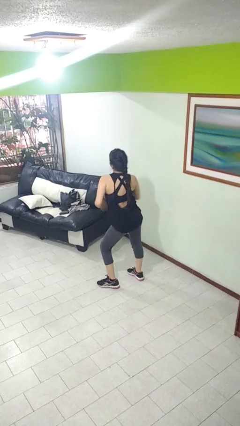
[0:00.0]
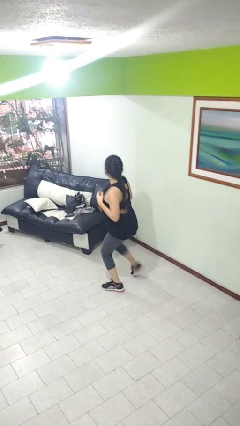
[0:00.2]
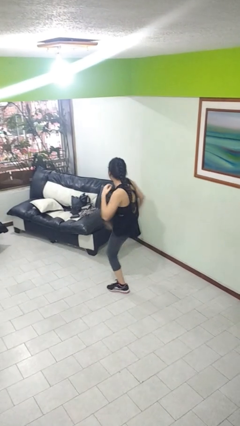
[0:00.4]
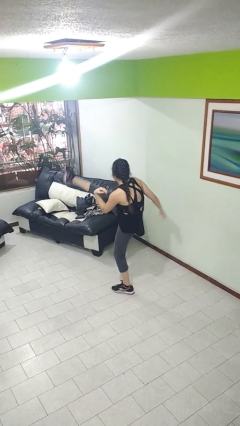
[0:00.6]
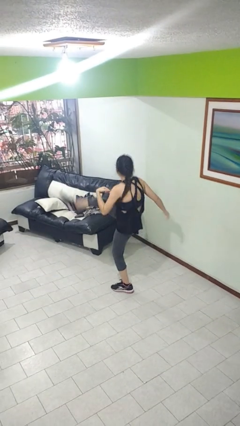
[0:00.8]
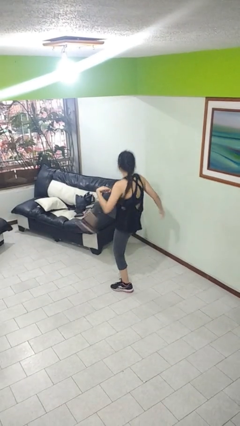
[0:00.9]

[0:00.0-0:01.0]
person karate kicks

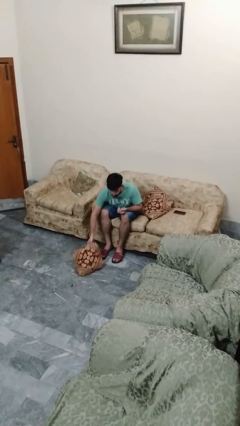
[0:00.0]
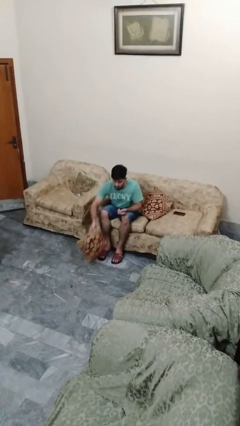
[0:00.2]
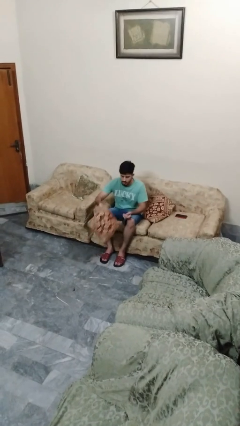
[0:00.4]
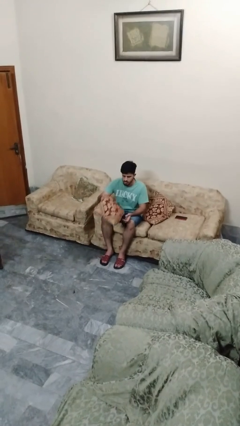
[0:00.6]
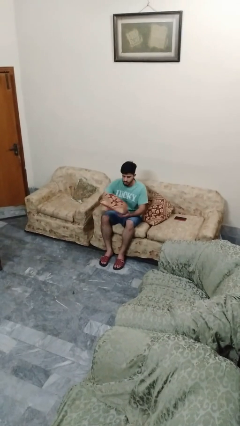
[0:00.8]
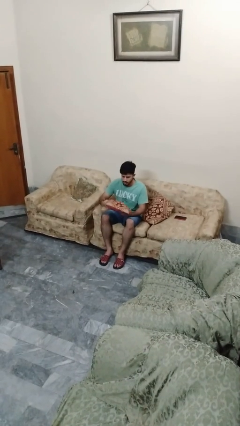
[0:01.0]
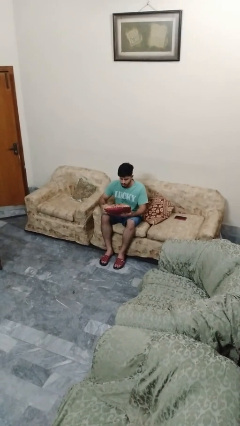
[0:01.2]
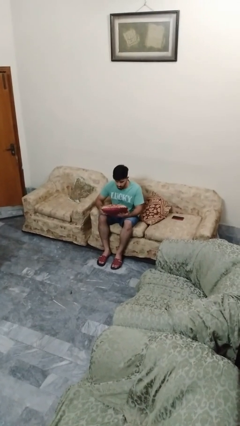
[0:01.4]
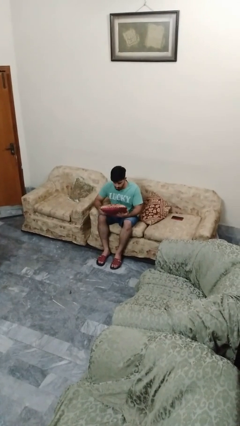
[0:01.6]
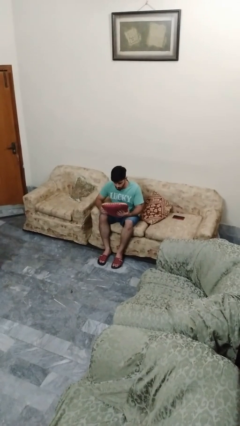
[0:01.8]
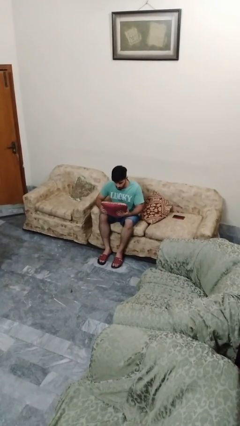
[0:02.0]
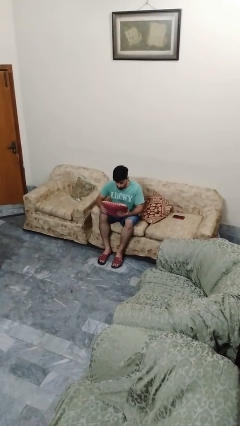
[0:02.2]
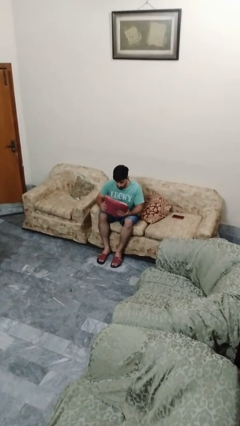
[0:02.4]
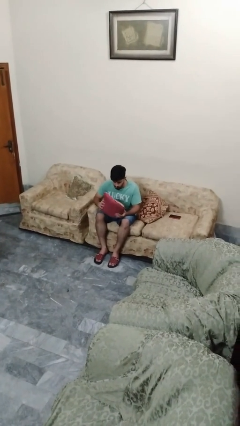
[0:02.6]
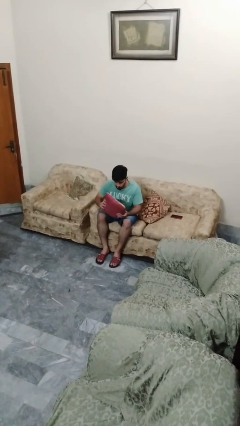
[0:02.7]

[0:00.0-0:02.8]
person picks up object from floor

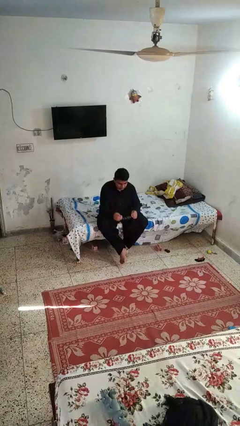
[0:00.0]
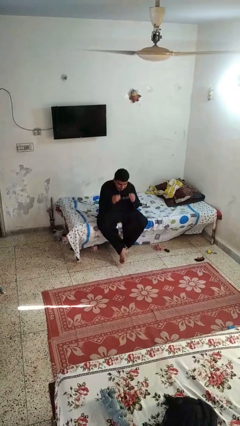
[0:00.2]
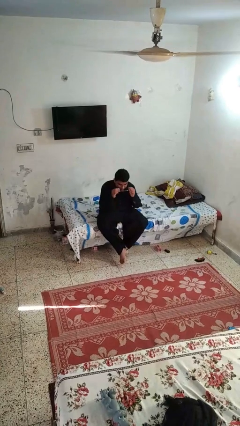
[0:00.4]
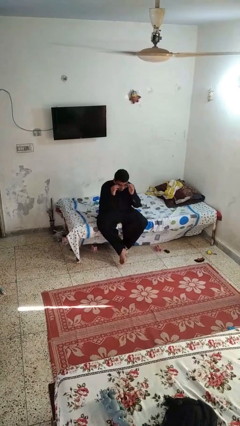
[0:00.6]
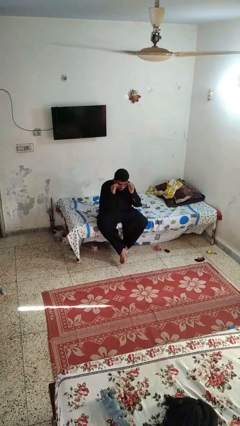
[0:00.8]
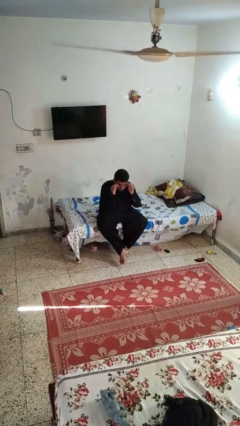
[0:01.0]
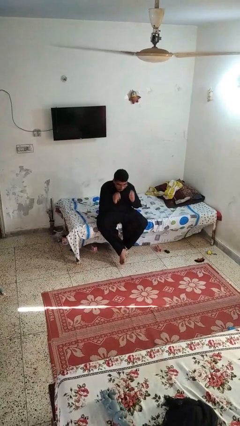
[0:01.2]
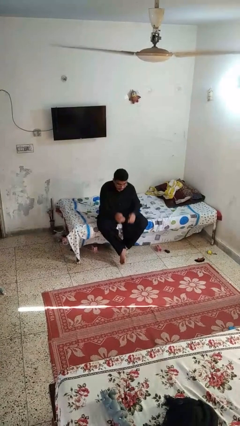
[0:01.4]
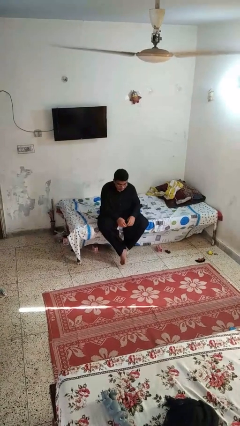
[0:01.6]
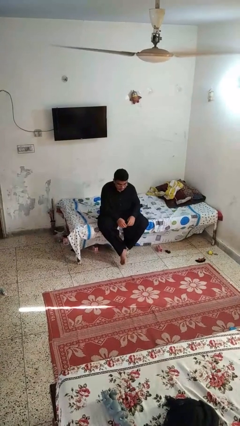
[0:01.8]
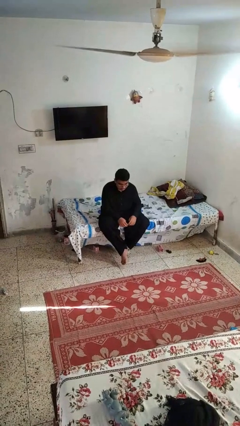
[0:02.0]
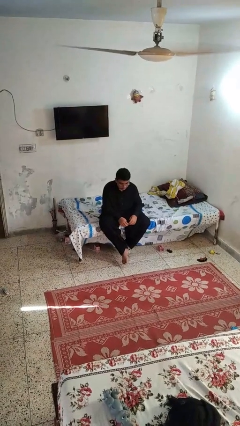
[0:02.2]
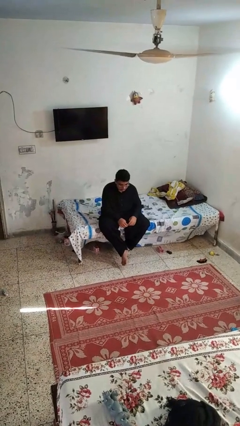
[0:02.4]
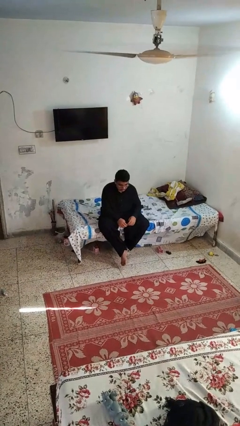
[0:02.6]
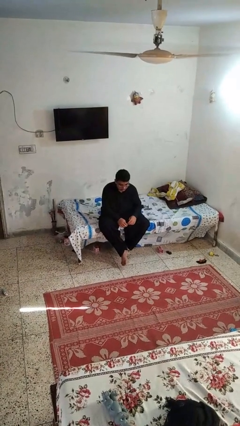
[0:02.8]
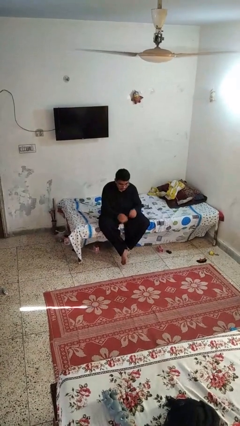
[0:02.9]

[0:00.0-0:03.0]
person puts on glasses

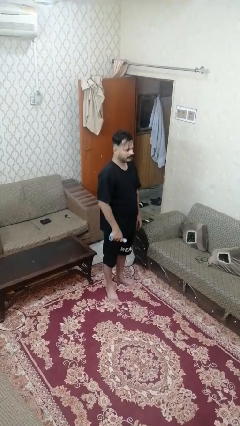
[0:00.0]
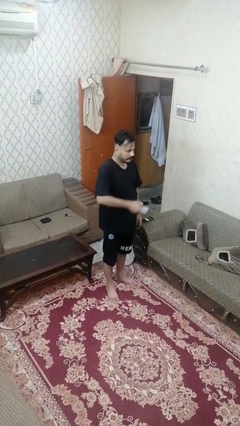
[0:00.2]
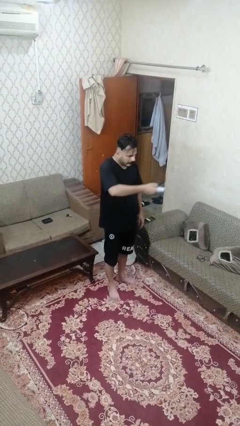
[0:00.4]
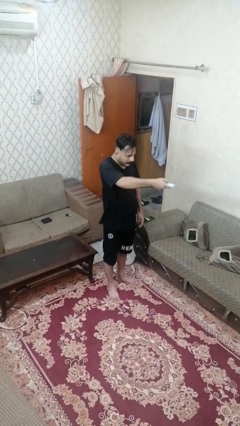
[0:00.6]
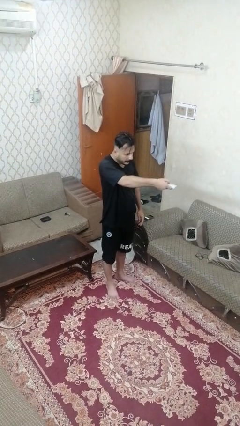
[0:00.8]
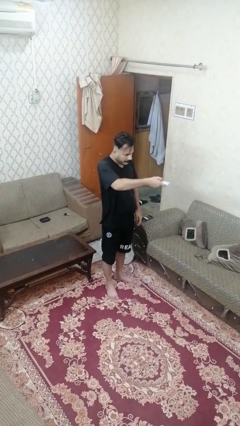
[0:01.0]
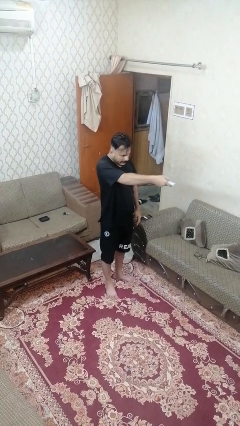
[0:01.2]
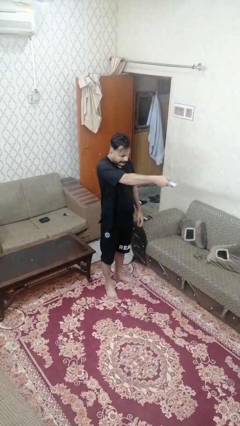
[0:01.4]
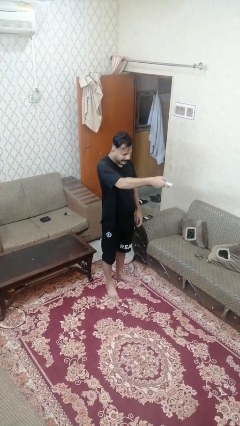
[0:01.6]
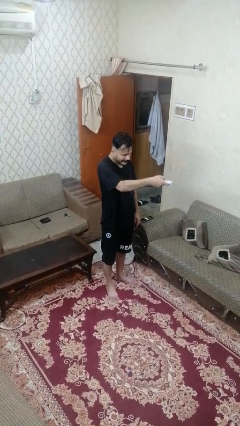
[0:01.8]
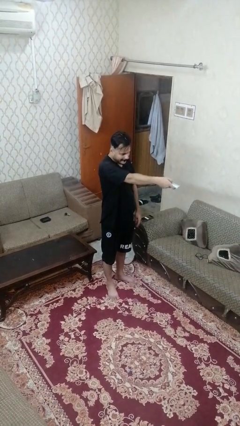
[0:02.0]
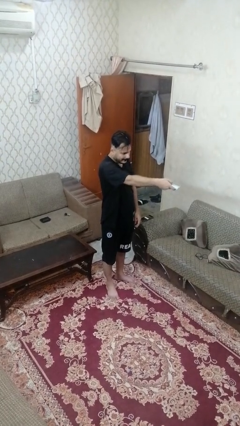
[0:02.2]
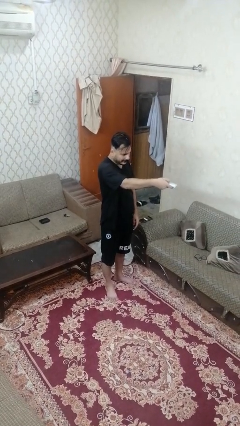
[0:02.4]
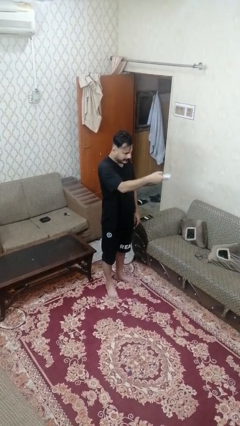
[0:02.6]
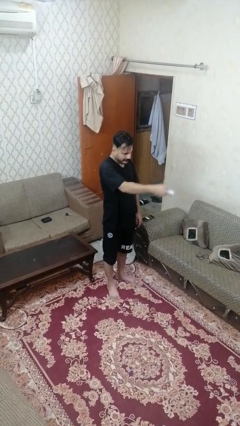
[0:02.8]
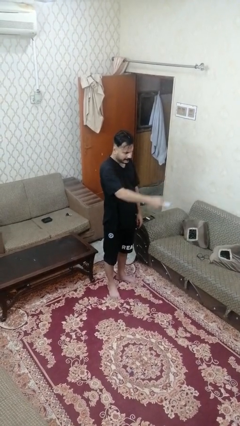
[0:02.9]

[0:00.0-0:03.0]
person uses television remote

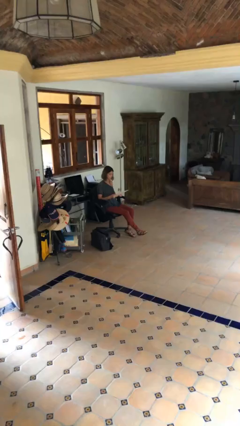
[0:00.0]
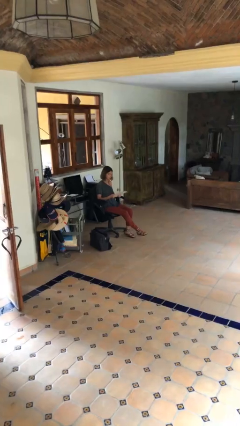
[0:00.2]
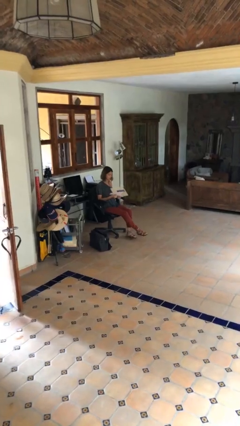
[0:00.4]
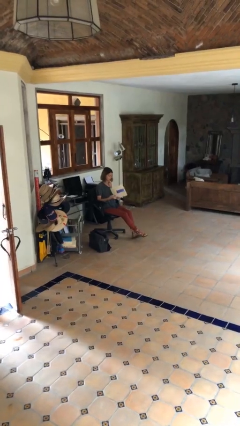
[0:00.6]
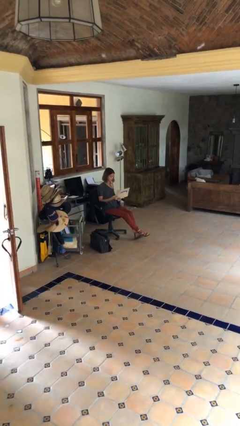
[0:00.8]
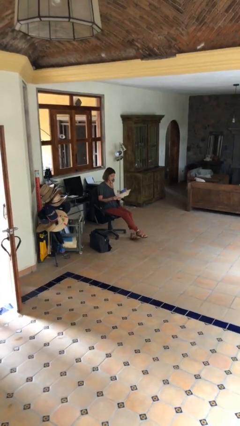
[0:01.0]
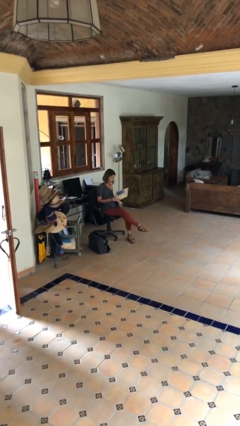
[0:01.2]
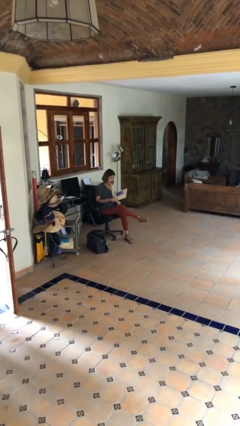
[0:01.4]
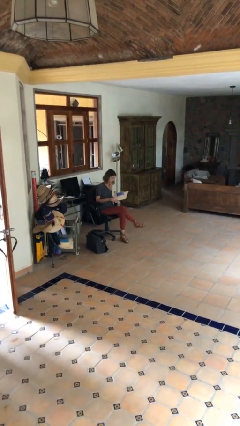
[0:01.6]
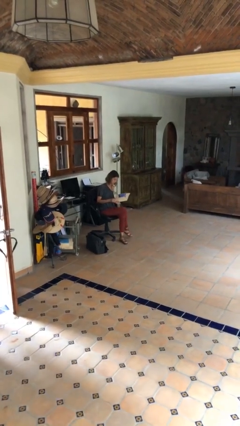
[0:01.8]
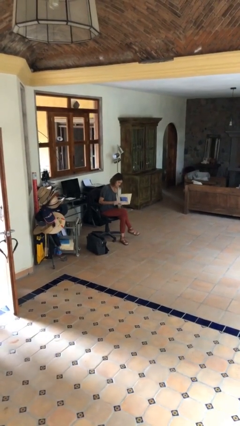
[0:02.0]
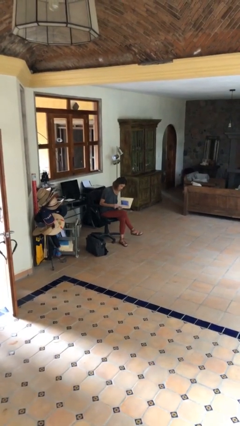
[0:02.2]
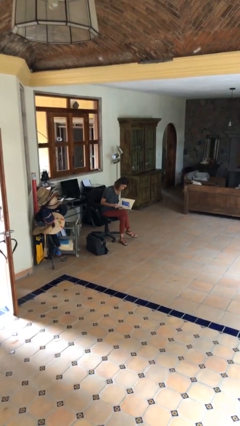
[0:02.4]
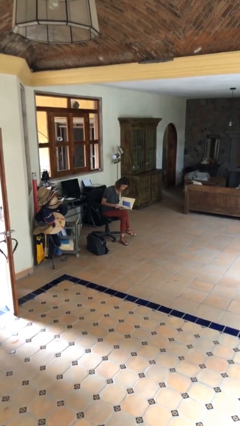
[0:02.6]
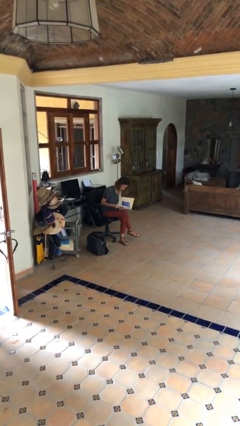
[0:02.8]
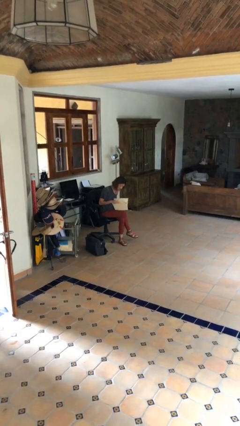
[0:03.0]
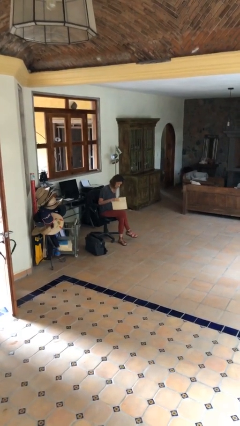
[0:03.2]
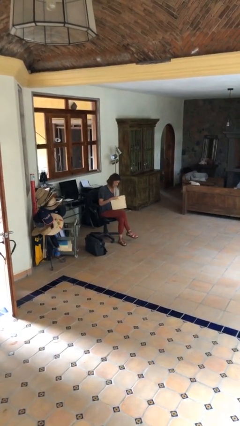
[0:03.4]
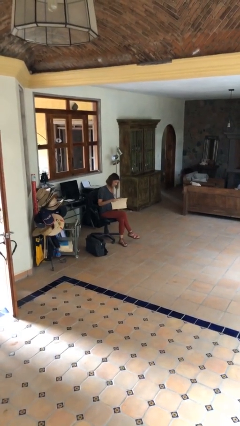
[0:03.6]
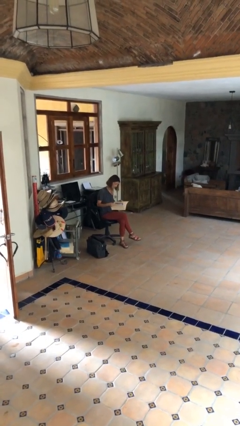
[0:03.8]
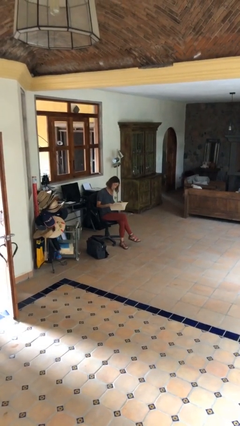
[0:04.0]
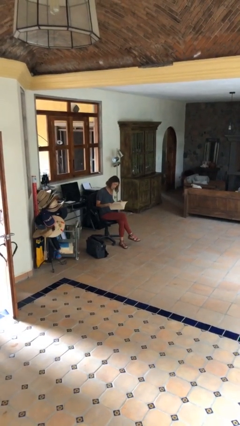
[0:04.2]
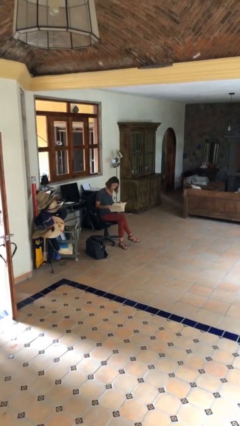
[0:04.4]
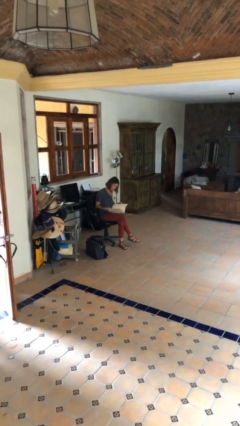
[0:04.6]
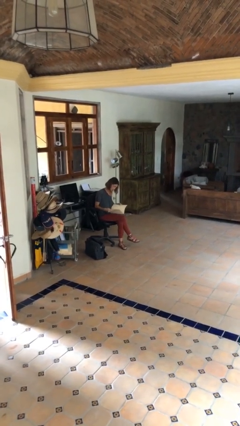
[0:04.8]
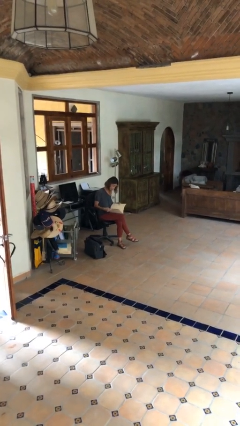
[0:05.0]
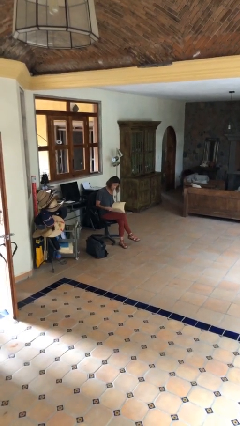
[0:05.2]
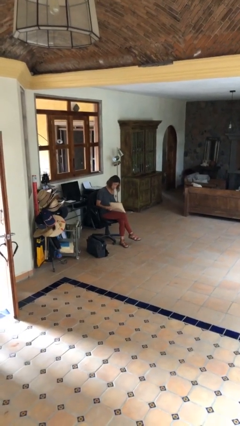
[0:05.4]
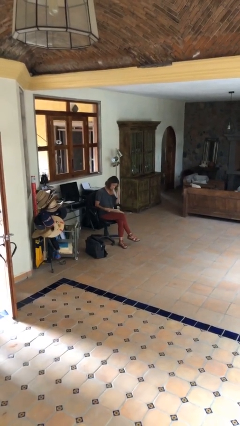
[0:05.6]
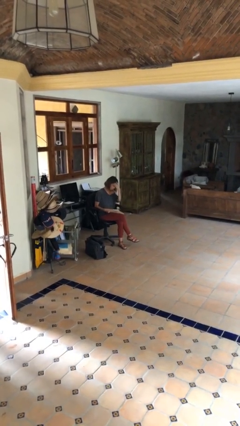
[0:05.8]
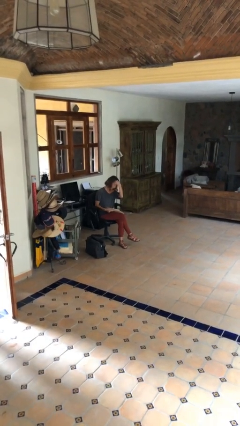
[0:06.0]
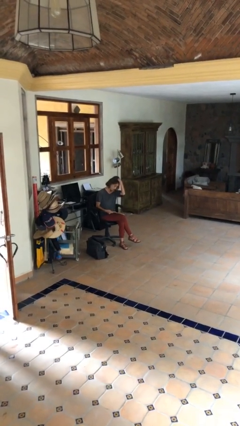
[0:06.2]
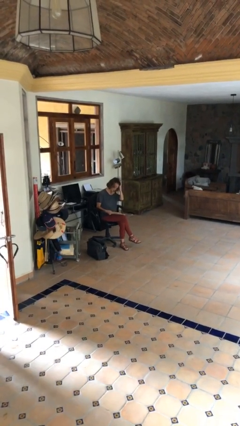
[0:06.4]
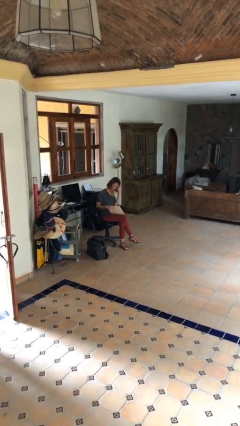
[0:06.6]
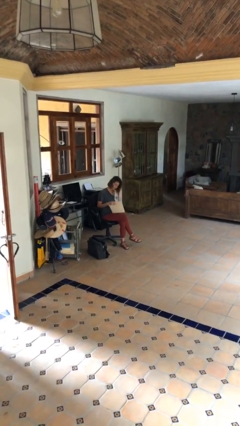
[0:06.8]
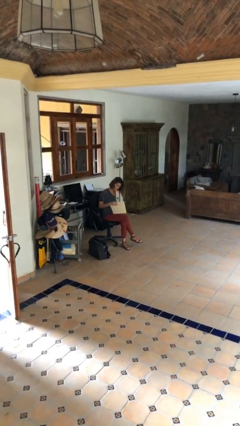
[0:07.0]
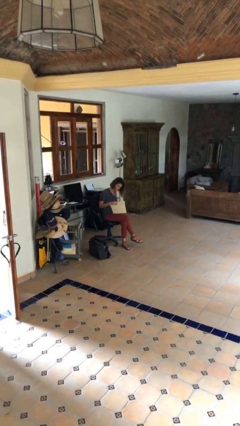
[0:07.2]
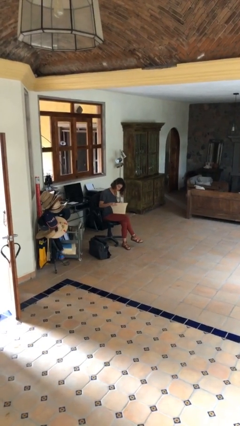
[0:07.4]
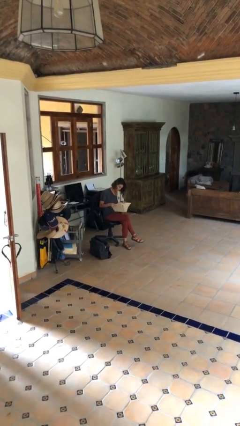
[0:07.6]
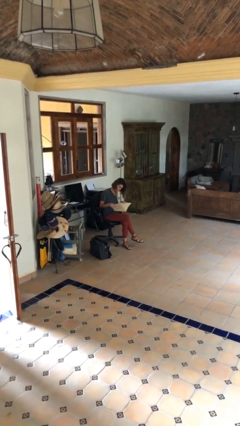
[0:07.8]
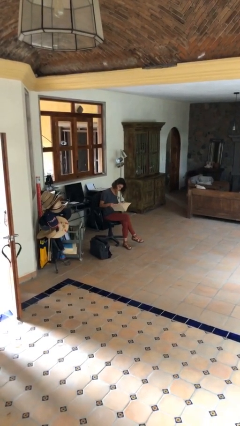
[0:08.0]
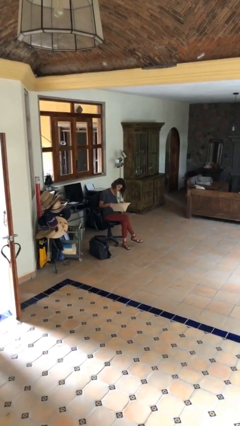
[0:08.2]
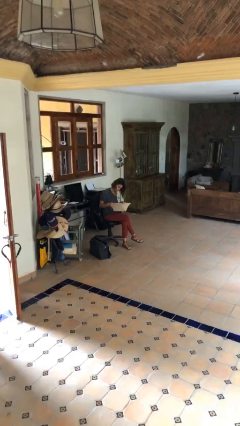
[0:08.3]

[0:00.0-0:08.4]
person reads document
